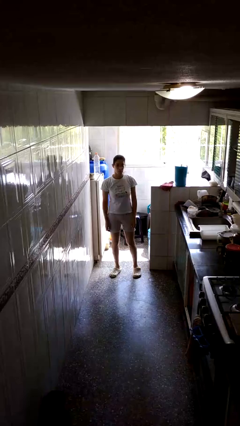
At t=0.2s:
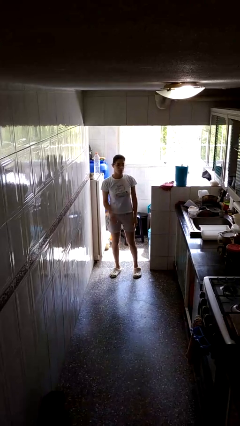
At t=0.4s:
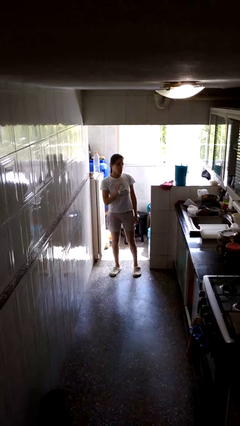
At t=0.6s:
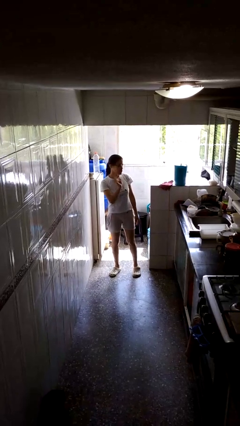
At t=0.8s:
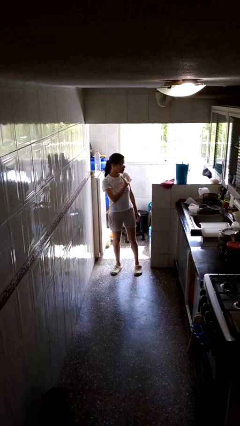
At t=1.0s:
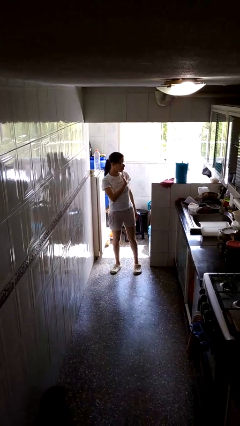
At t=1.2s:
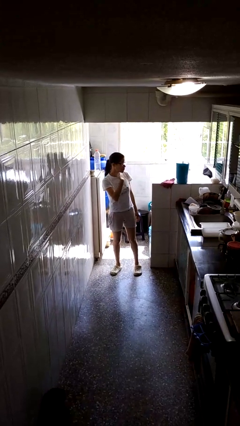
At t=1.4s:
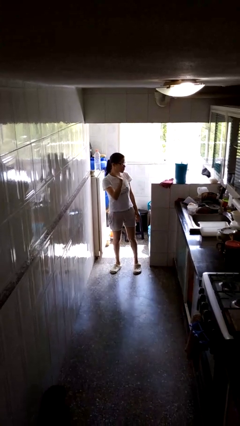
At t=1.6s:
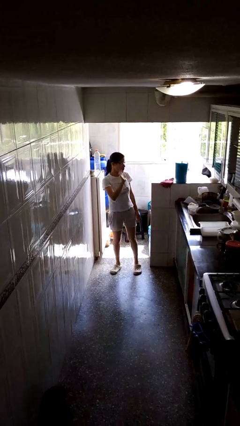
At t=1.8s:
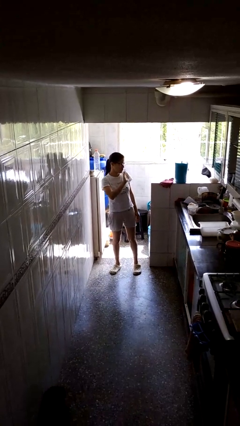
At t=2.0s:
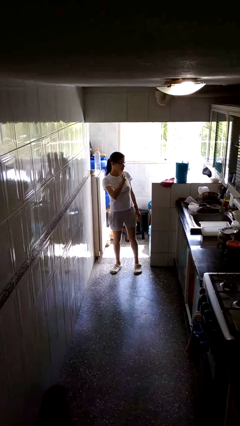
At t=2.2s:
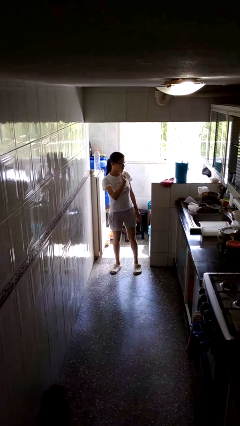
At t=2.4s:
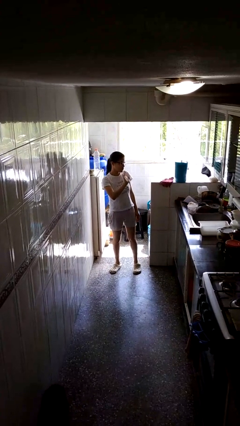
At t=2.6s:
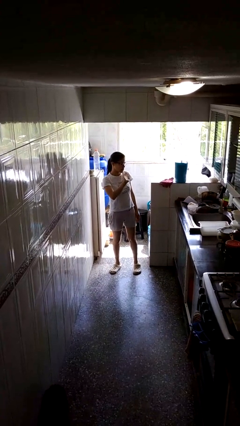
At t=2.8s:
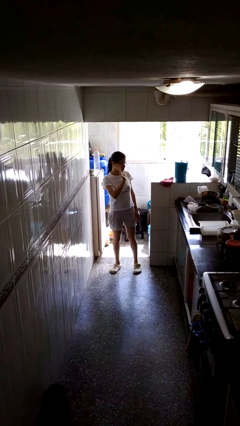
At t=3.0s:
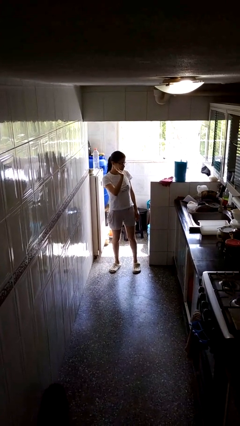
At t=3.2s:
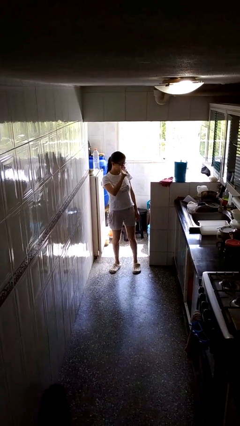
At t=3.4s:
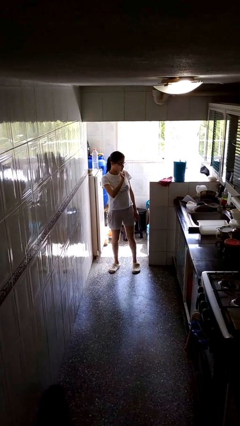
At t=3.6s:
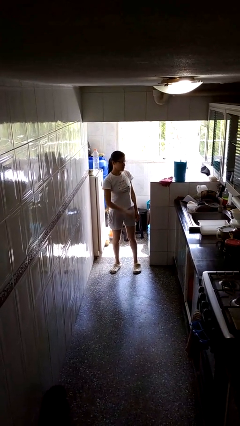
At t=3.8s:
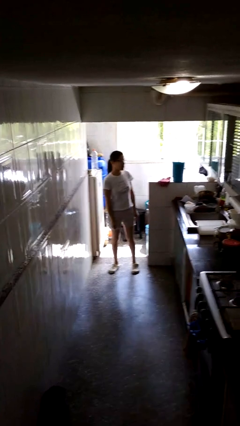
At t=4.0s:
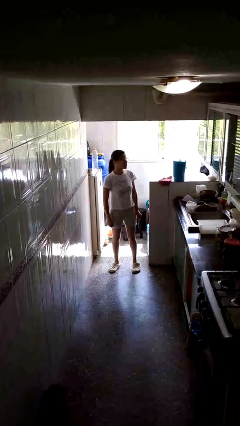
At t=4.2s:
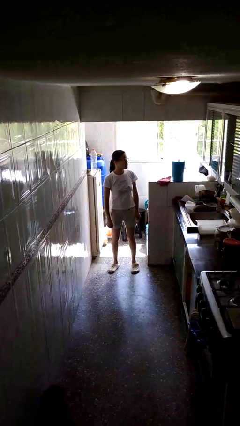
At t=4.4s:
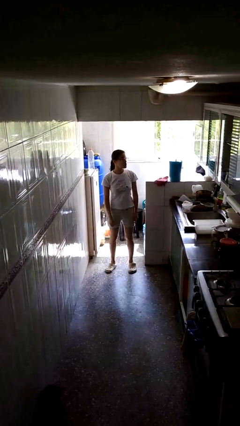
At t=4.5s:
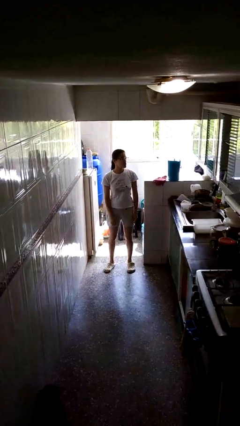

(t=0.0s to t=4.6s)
person waves at person

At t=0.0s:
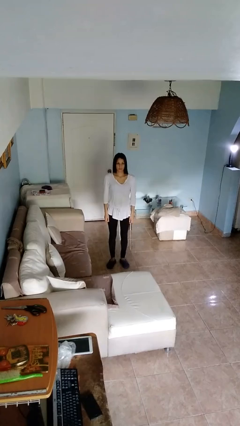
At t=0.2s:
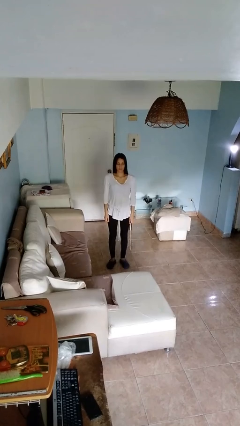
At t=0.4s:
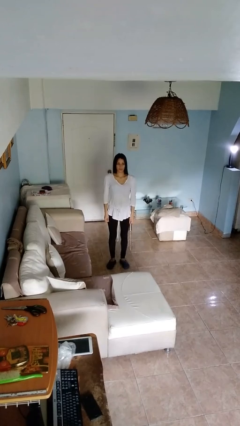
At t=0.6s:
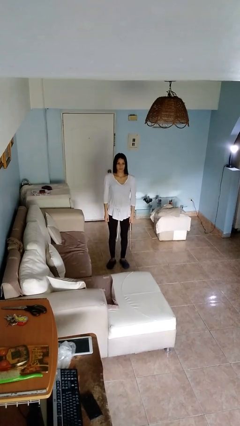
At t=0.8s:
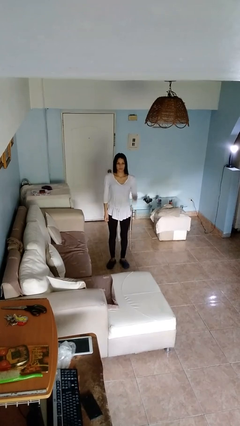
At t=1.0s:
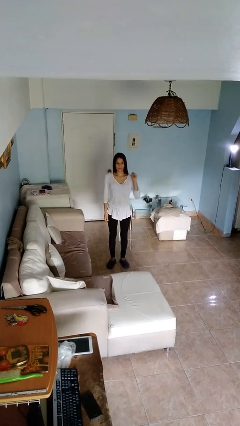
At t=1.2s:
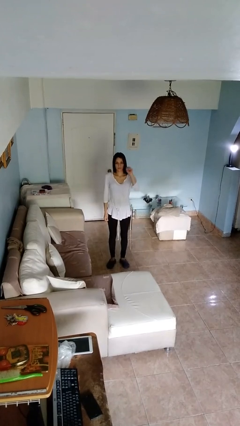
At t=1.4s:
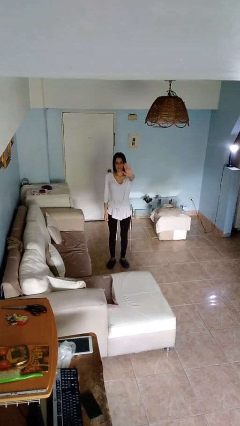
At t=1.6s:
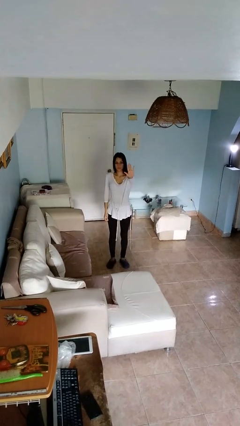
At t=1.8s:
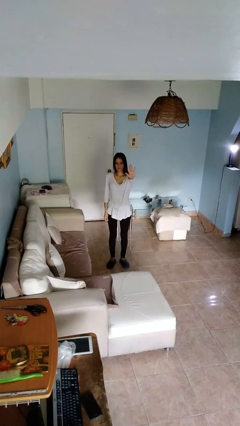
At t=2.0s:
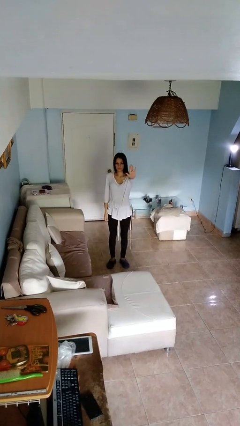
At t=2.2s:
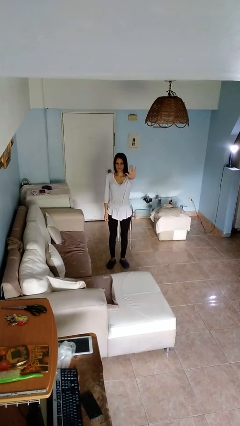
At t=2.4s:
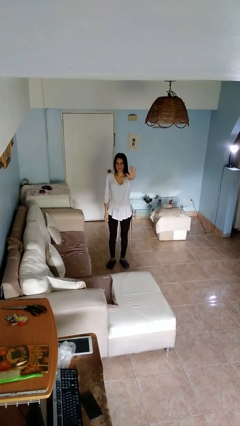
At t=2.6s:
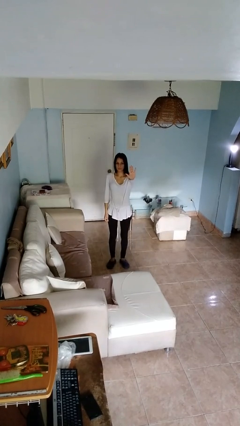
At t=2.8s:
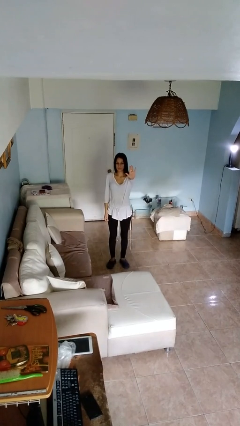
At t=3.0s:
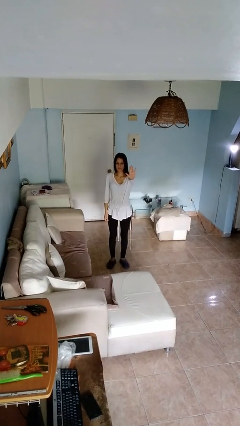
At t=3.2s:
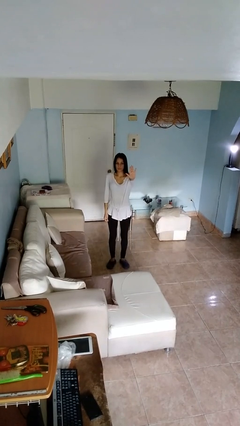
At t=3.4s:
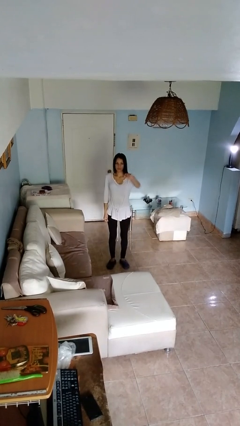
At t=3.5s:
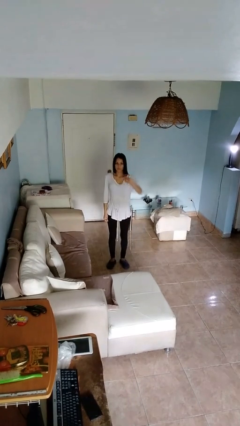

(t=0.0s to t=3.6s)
person gestures stop

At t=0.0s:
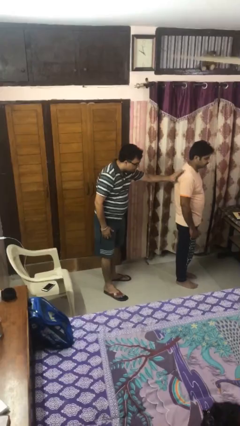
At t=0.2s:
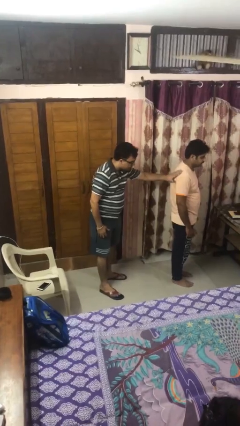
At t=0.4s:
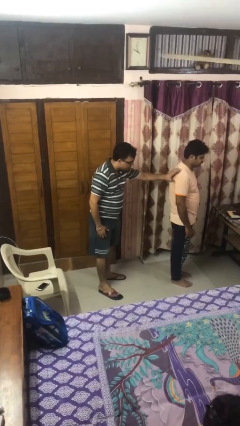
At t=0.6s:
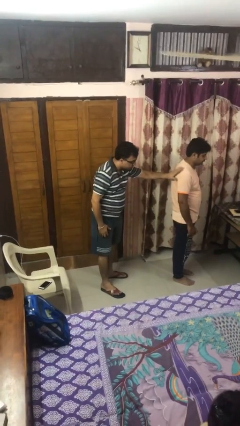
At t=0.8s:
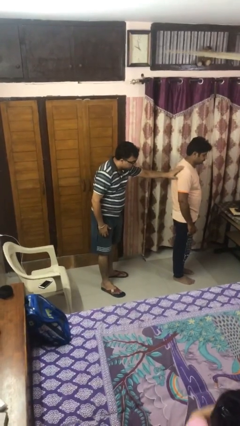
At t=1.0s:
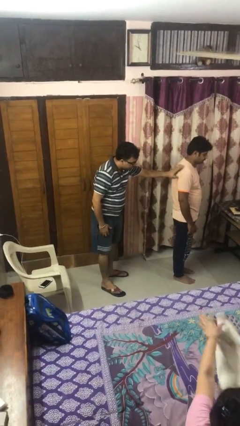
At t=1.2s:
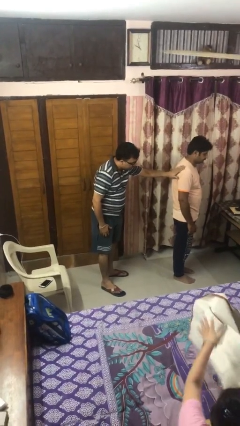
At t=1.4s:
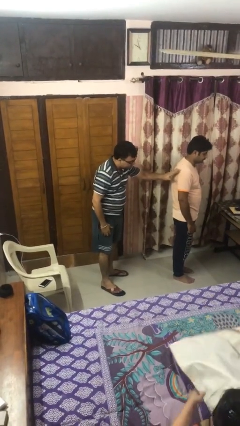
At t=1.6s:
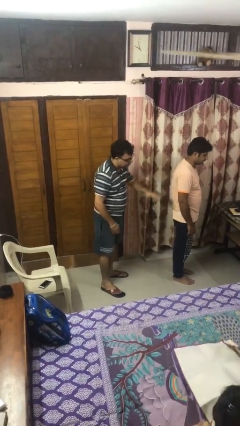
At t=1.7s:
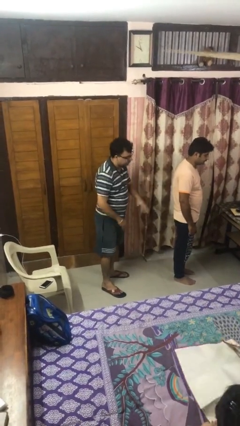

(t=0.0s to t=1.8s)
person touches back of person

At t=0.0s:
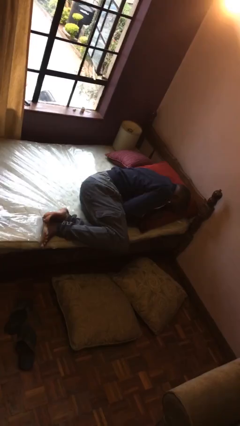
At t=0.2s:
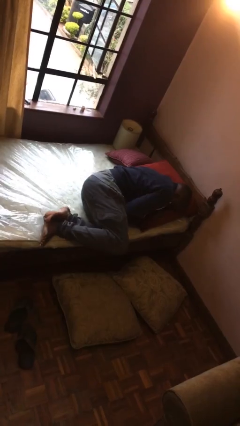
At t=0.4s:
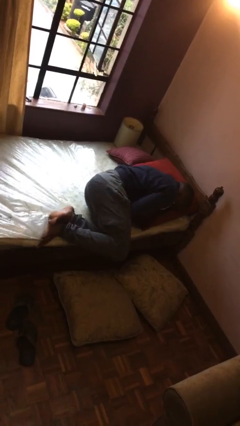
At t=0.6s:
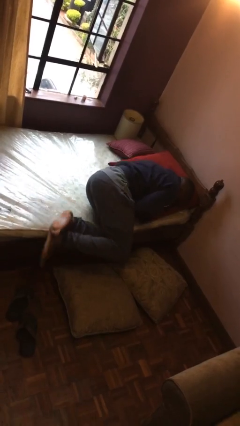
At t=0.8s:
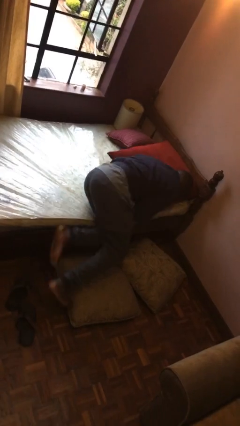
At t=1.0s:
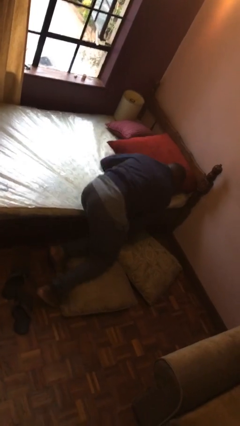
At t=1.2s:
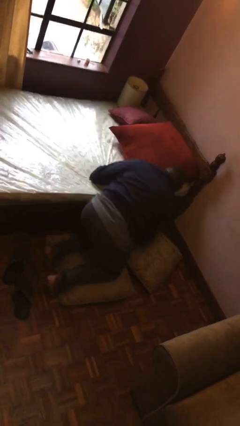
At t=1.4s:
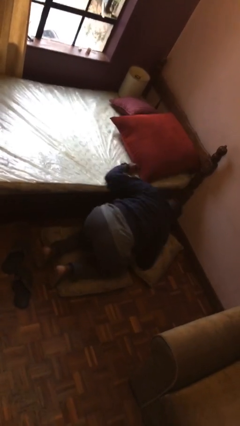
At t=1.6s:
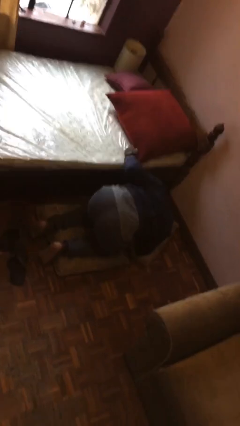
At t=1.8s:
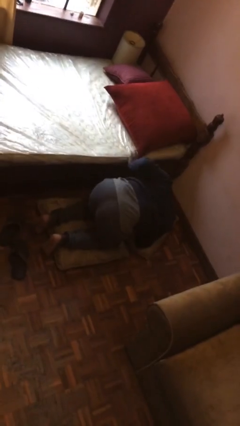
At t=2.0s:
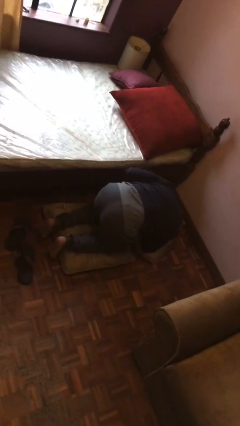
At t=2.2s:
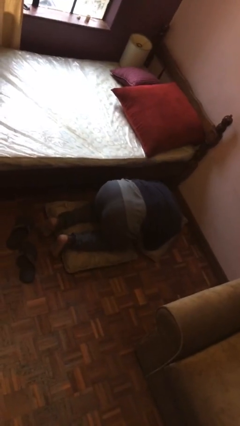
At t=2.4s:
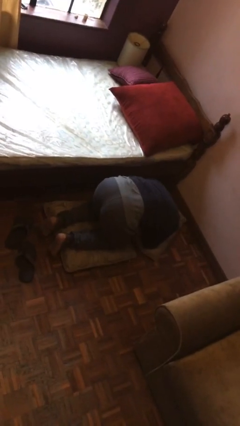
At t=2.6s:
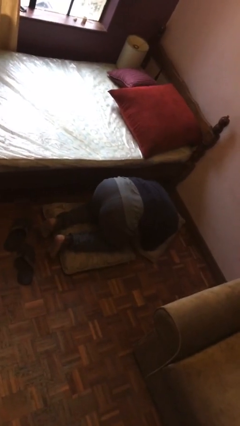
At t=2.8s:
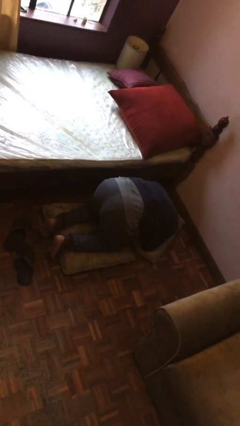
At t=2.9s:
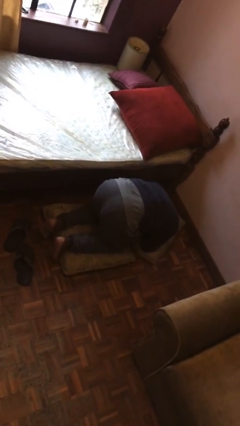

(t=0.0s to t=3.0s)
person falls from bed

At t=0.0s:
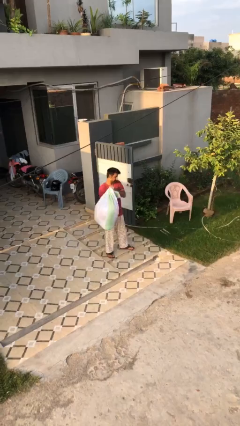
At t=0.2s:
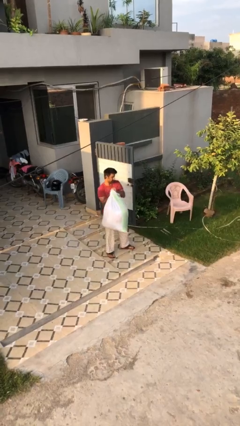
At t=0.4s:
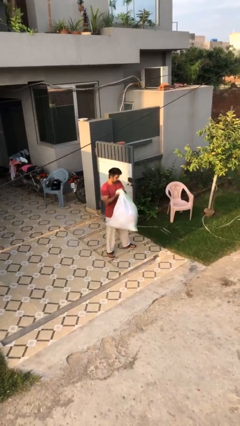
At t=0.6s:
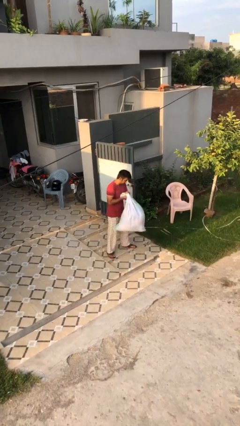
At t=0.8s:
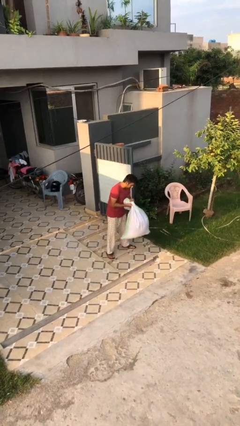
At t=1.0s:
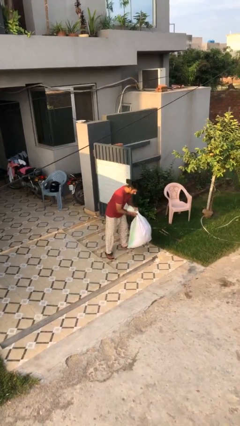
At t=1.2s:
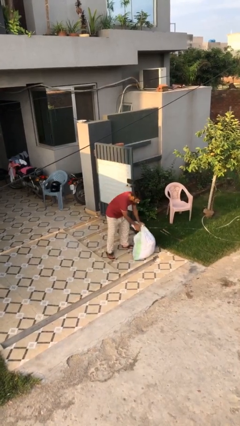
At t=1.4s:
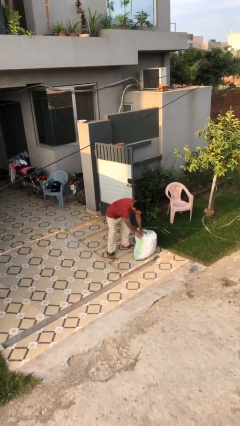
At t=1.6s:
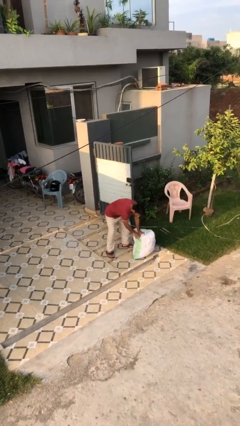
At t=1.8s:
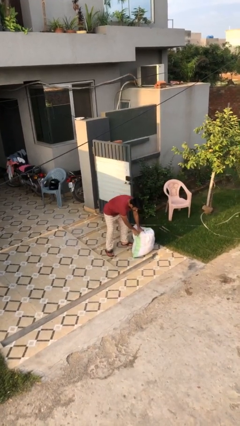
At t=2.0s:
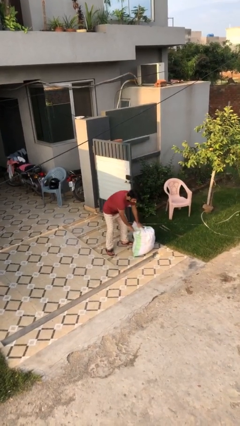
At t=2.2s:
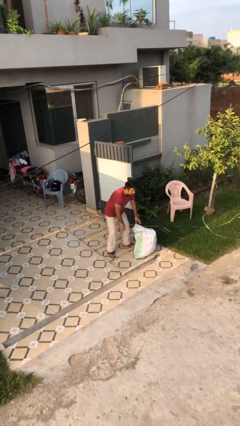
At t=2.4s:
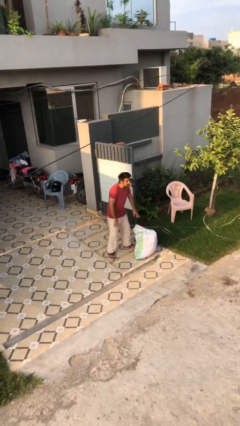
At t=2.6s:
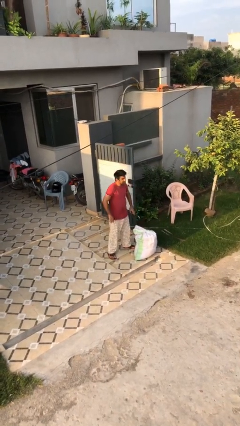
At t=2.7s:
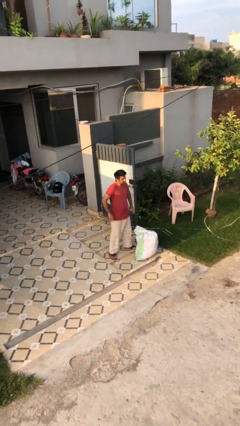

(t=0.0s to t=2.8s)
person puts down object on floor

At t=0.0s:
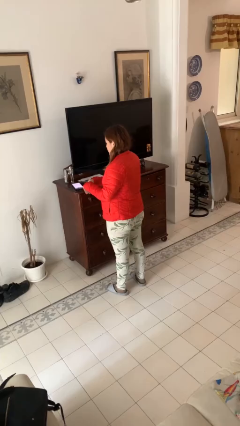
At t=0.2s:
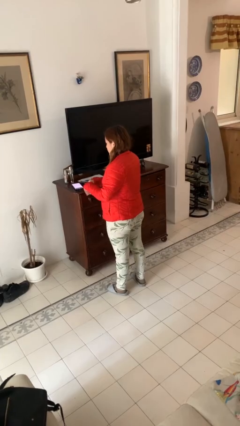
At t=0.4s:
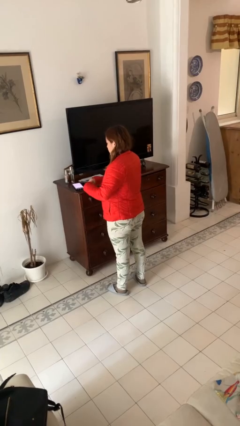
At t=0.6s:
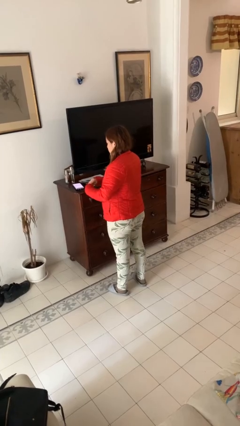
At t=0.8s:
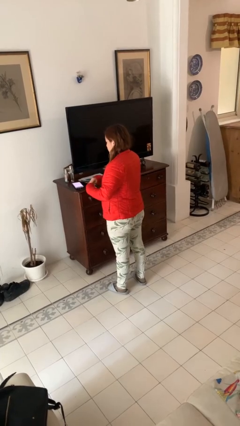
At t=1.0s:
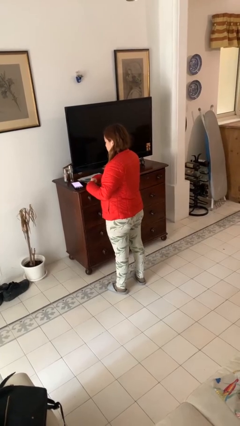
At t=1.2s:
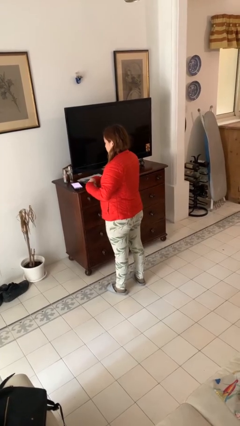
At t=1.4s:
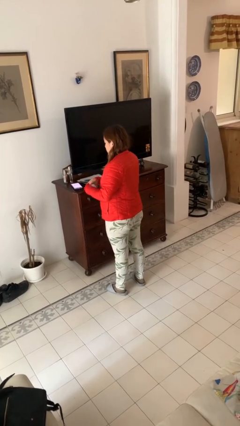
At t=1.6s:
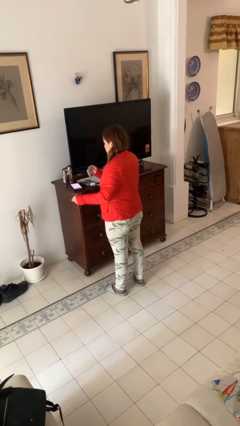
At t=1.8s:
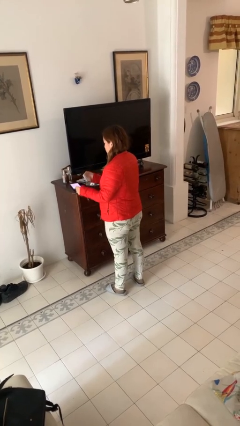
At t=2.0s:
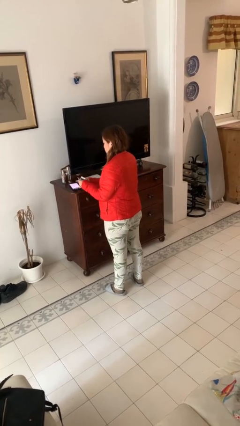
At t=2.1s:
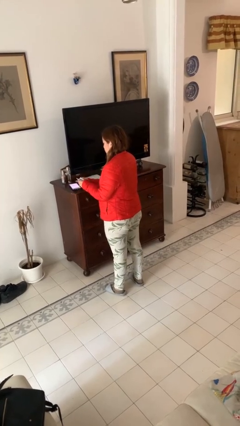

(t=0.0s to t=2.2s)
person tears paper
